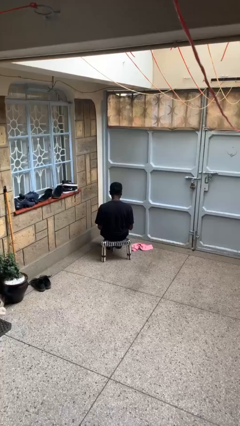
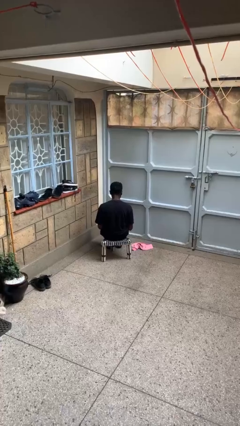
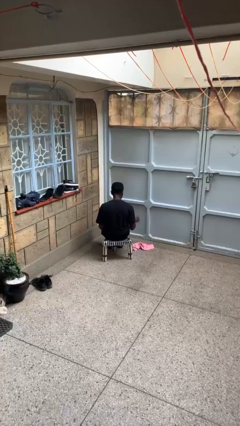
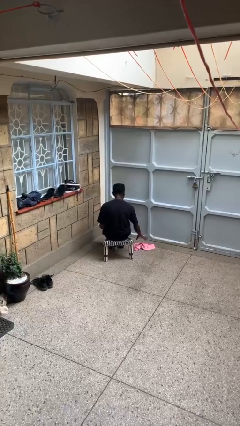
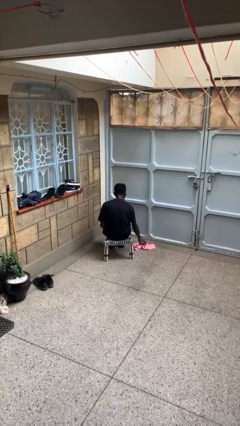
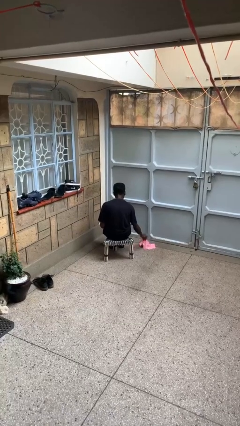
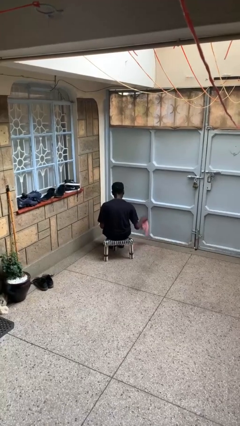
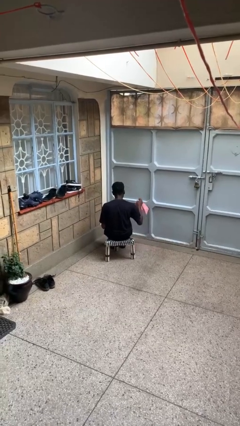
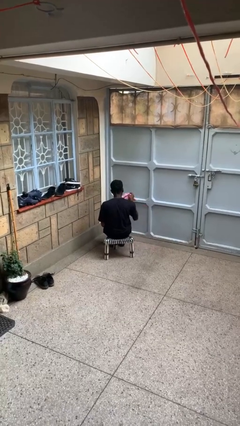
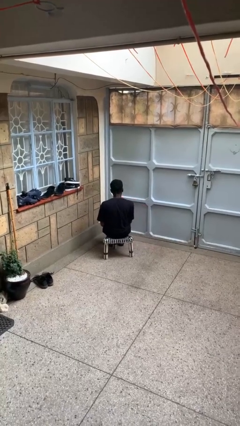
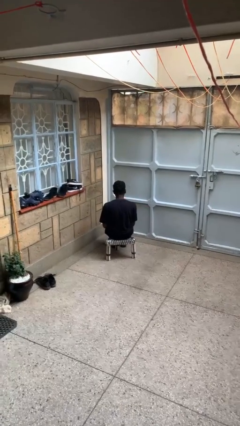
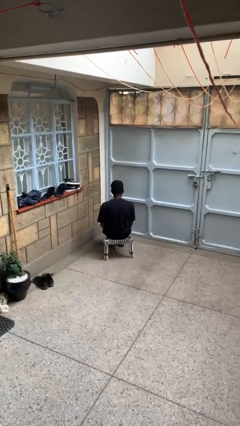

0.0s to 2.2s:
person picks up object from floor

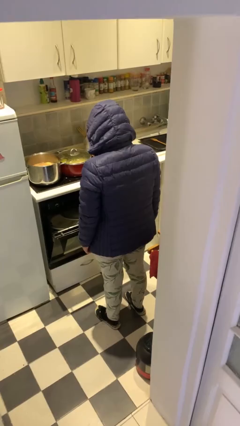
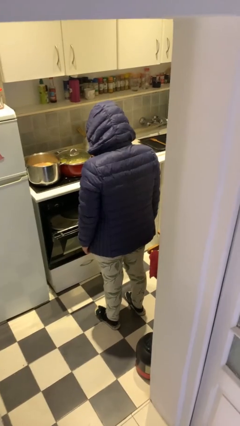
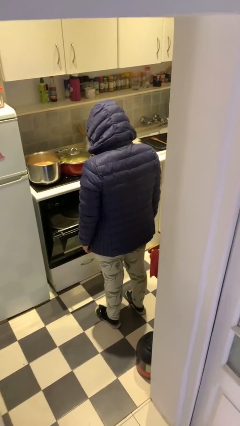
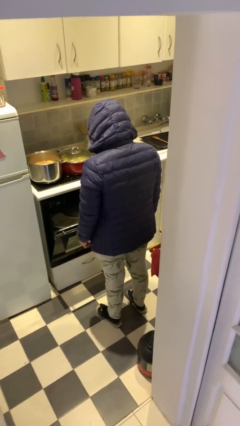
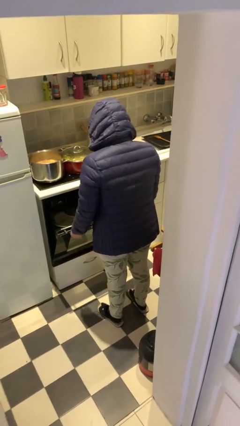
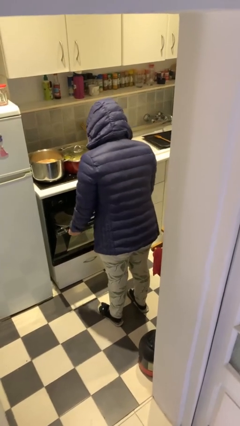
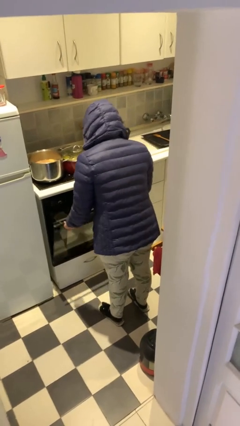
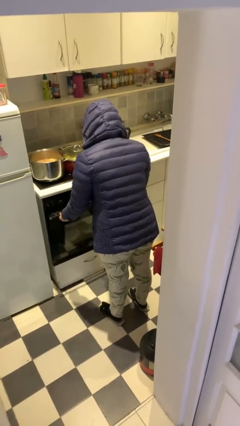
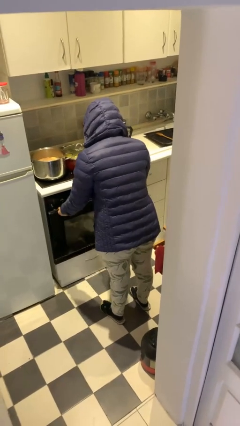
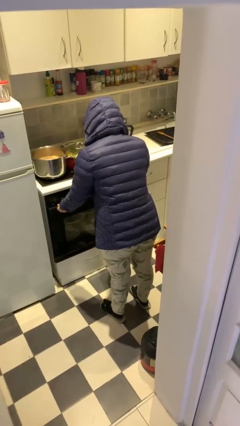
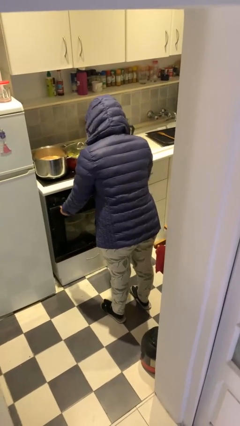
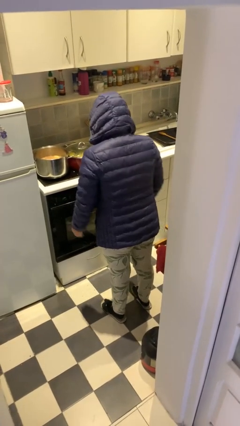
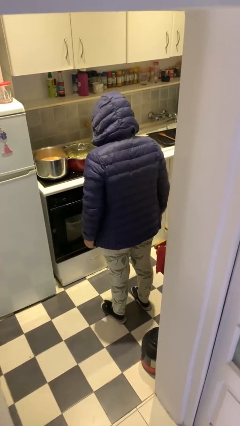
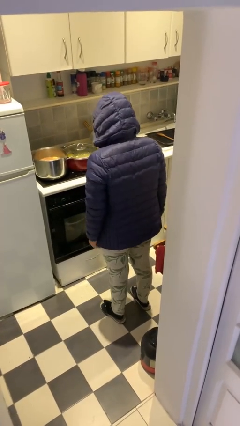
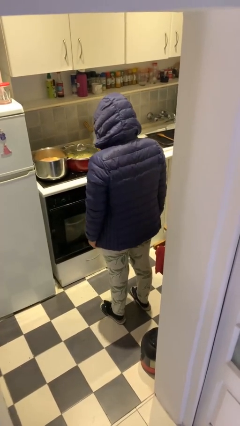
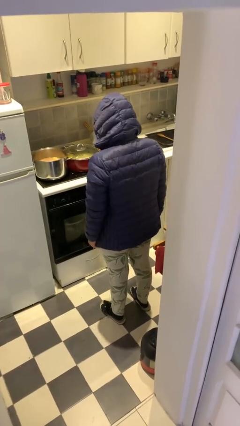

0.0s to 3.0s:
person closes dishwasher

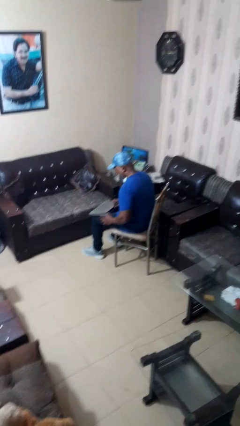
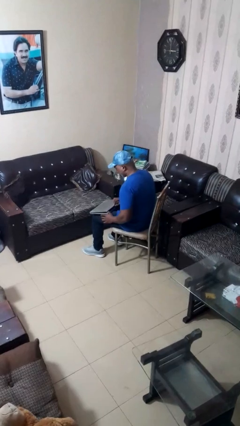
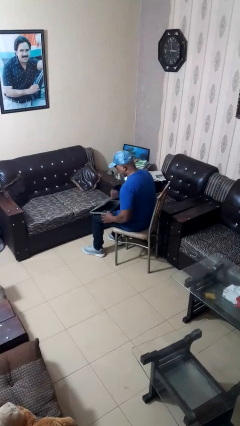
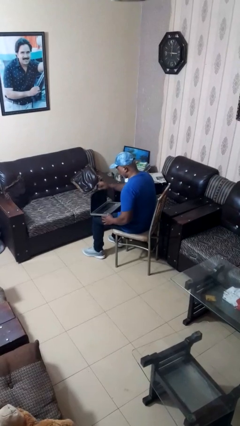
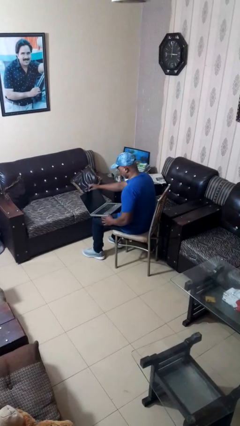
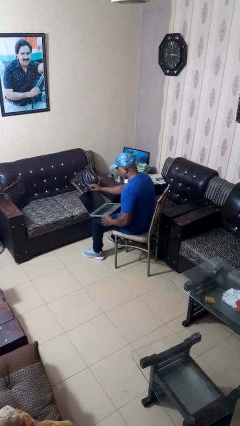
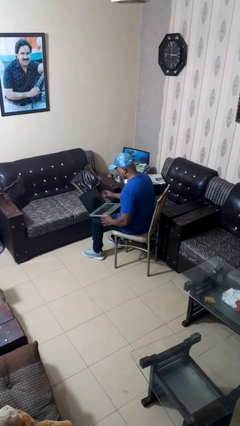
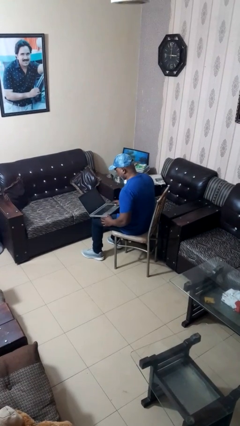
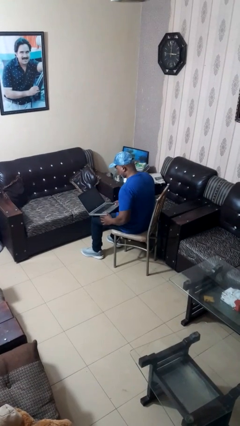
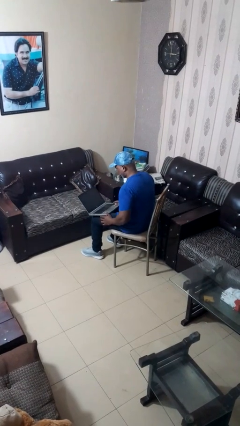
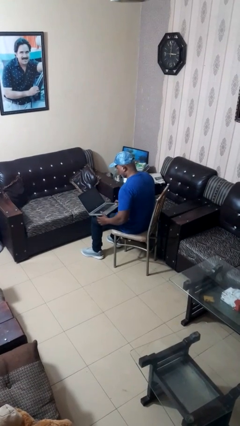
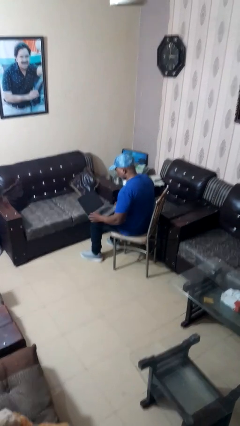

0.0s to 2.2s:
person opens laptop

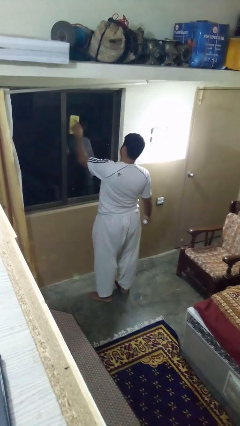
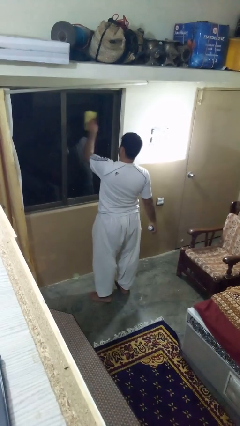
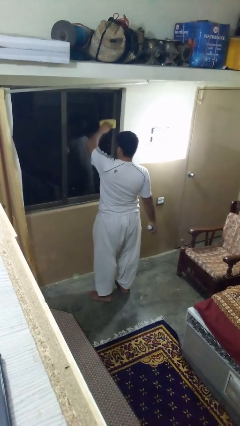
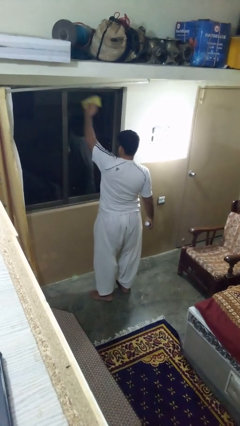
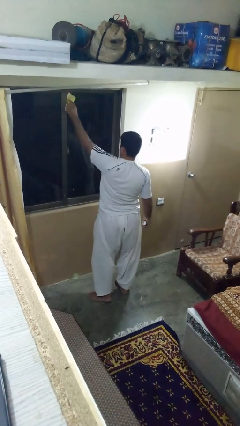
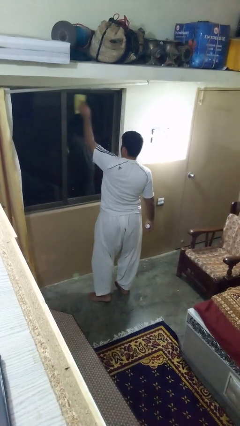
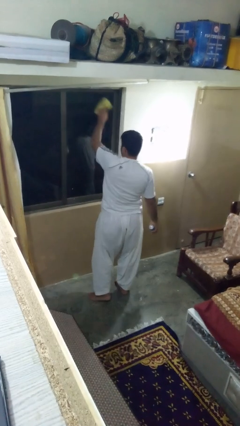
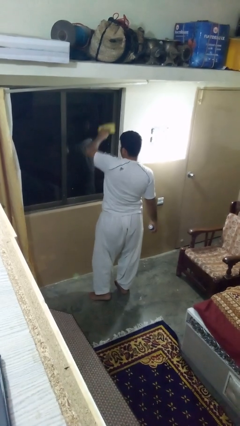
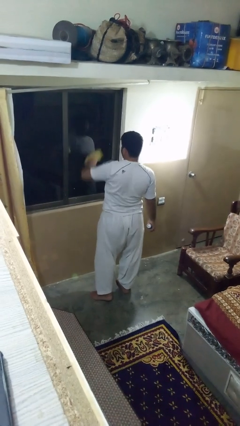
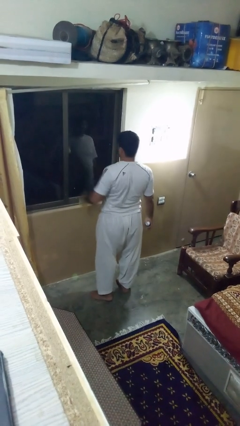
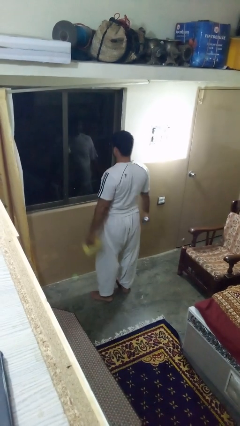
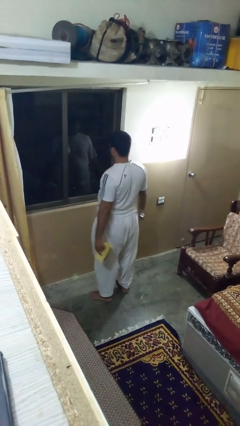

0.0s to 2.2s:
person washes window

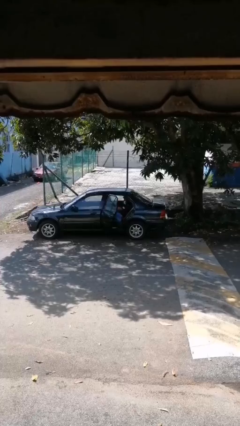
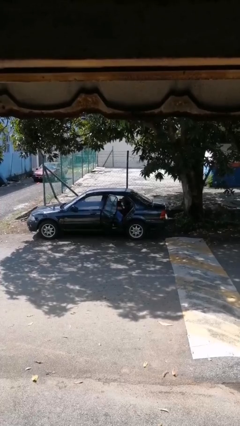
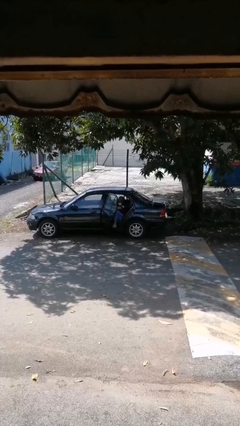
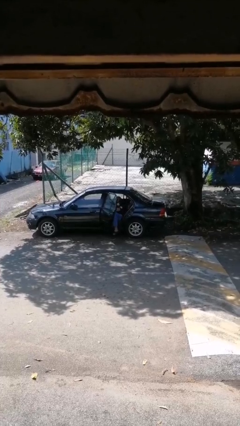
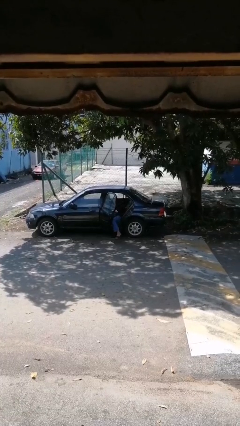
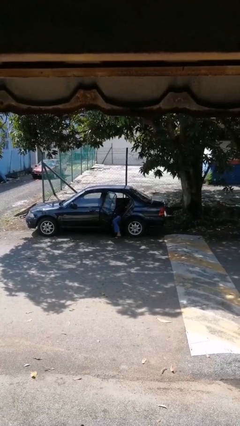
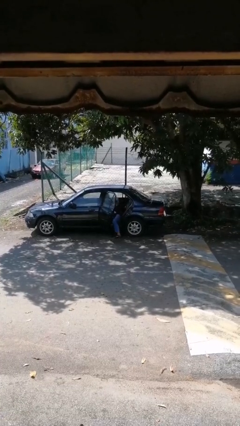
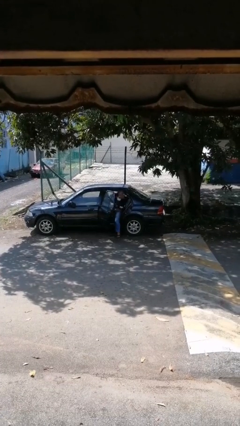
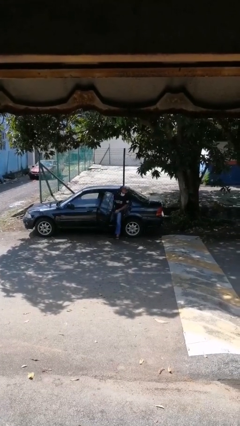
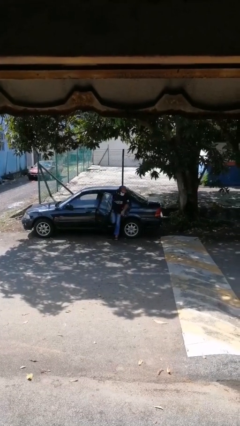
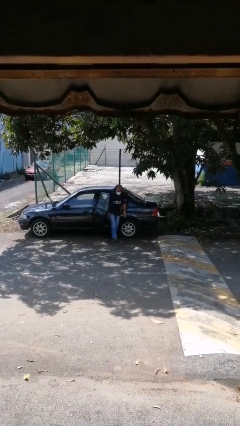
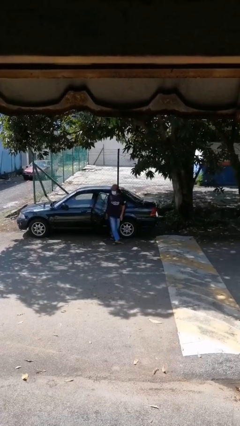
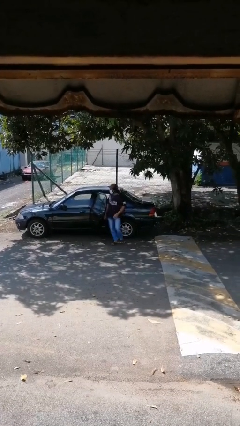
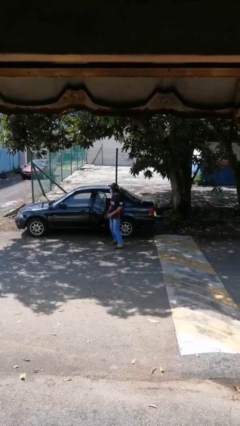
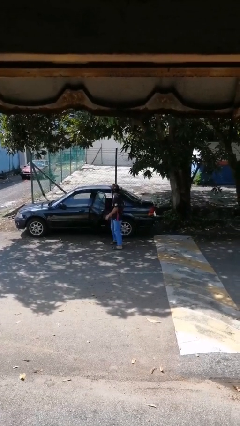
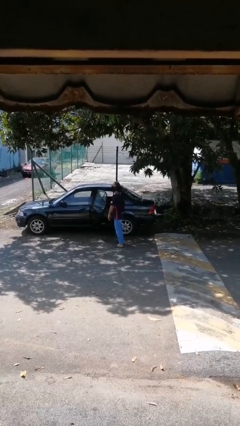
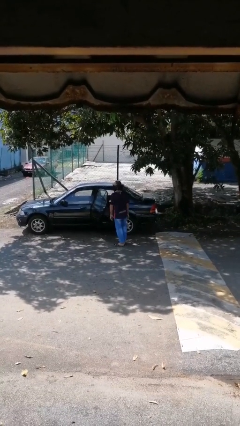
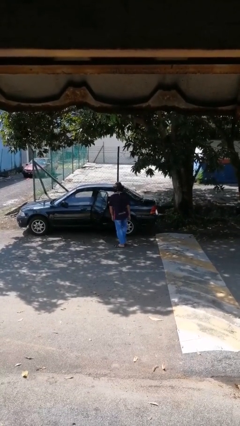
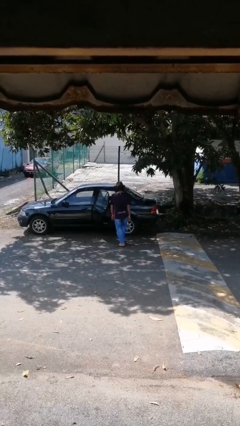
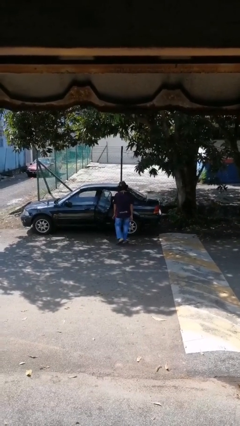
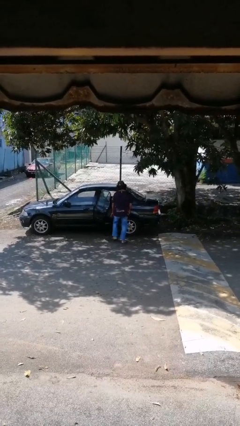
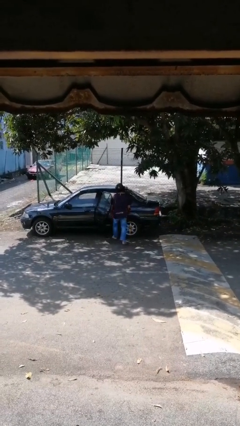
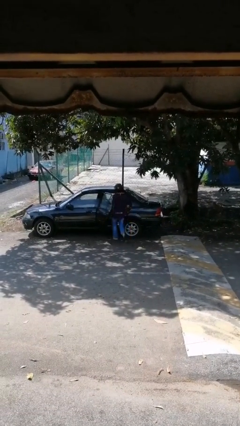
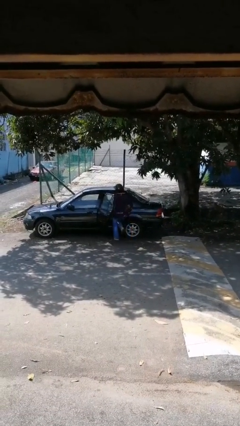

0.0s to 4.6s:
person enters car

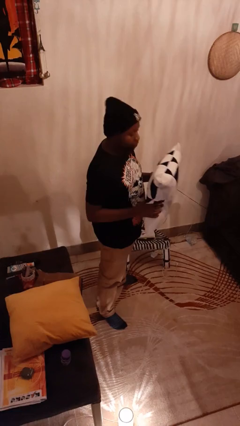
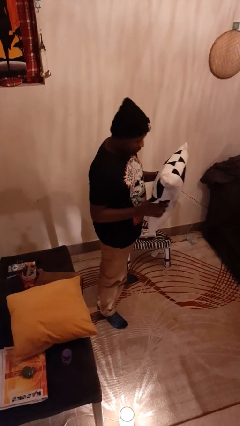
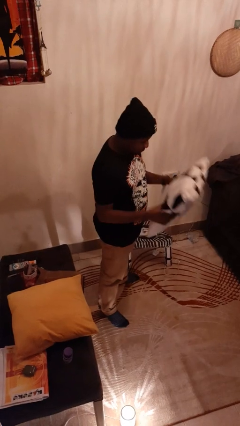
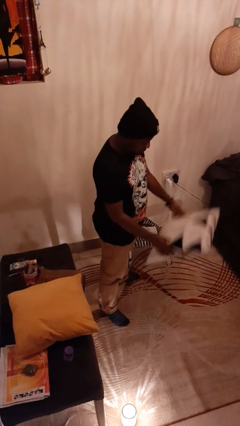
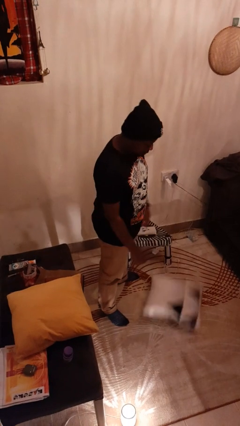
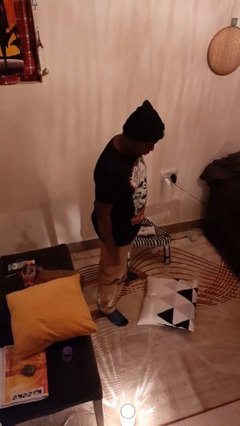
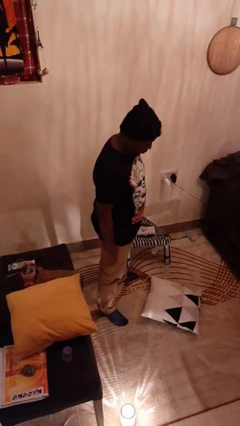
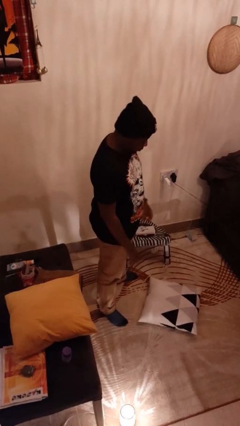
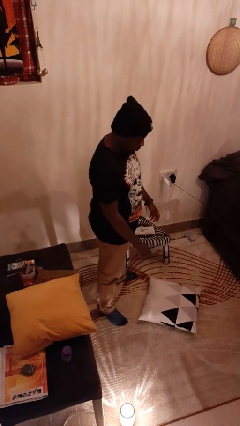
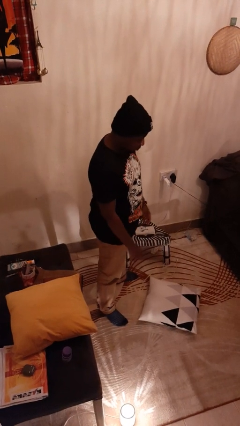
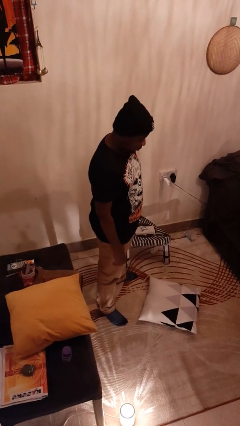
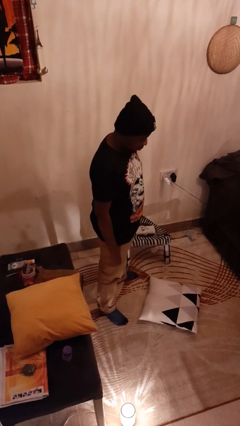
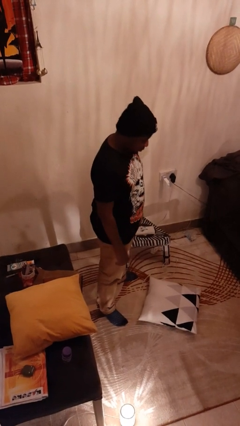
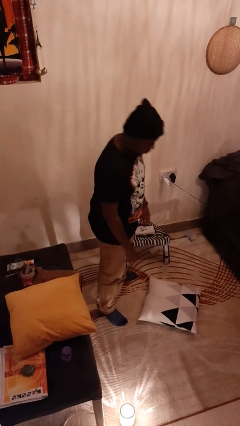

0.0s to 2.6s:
person drops object

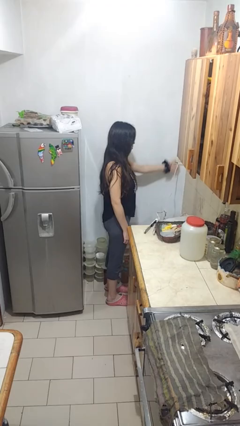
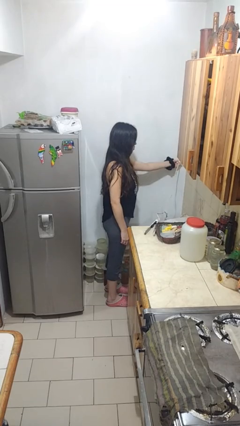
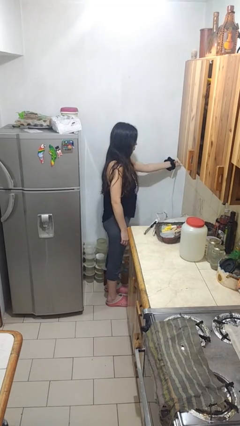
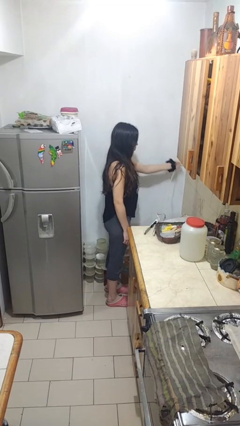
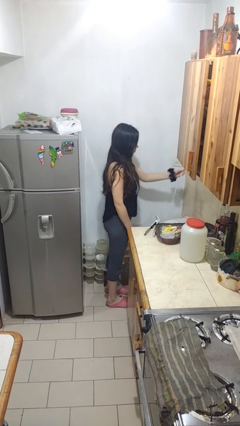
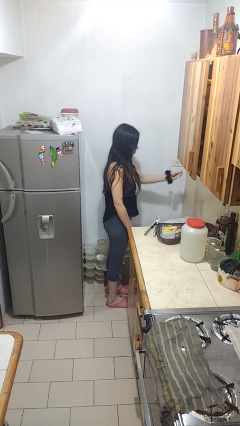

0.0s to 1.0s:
person unplugs from electrical socket
